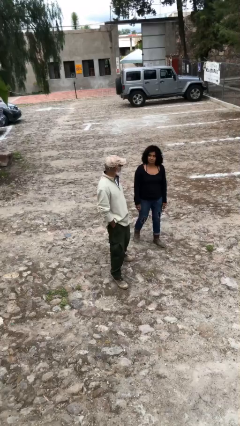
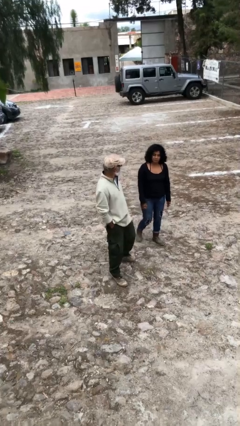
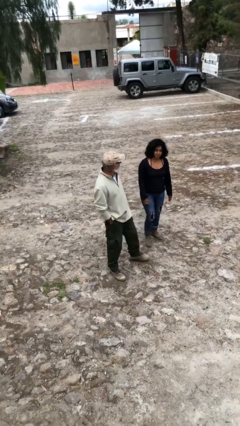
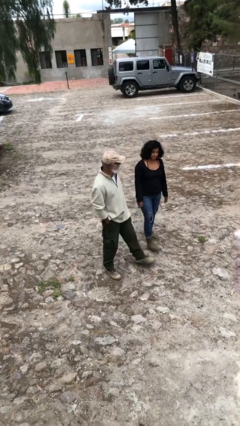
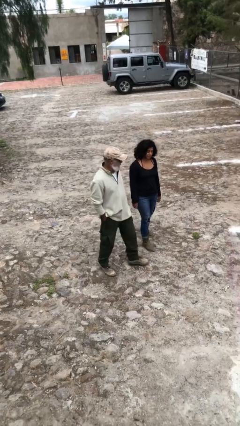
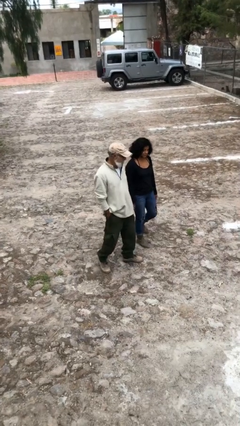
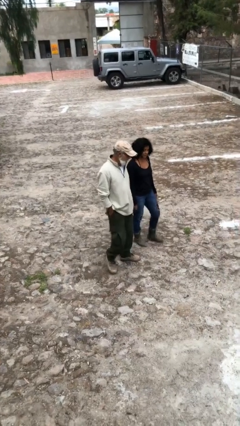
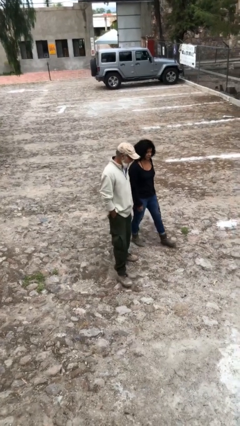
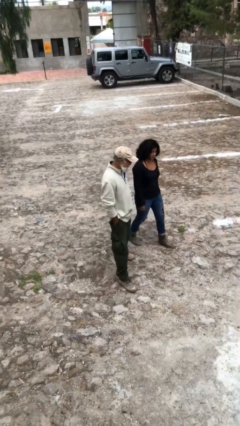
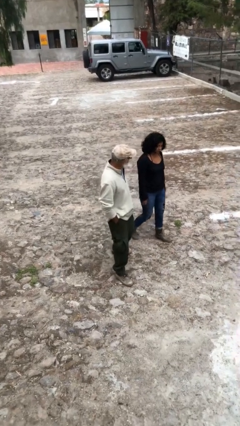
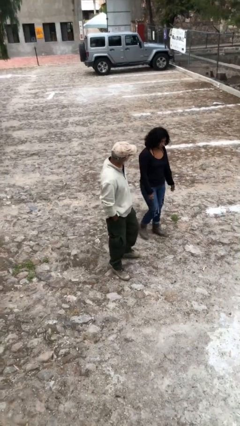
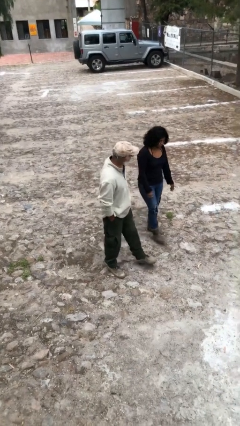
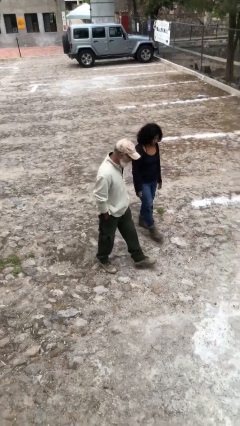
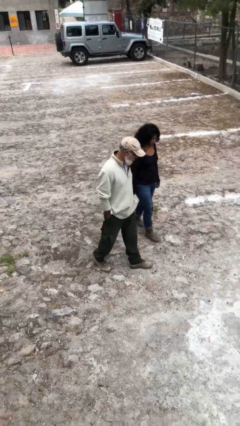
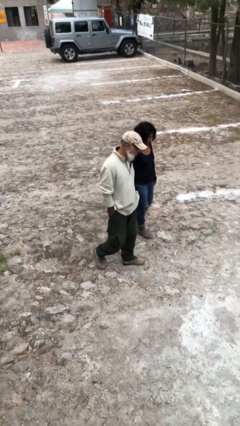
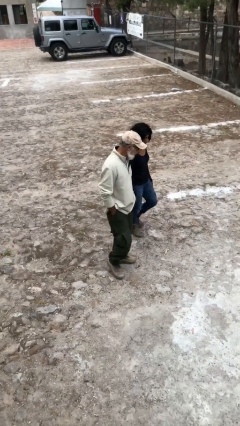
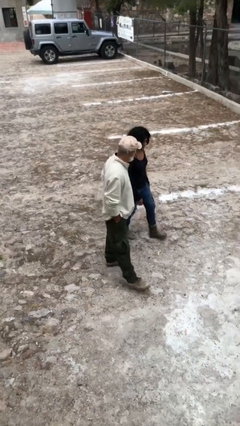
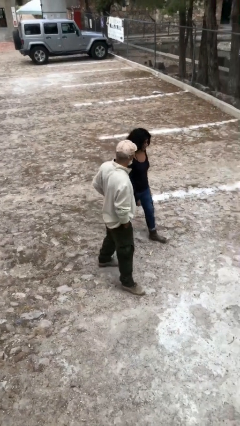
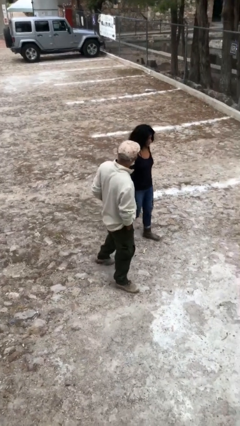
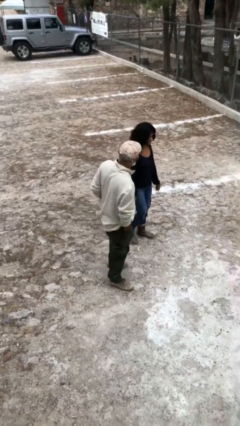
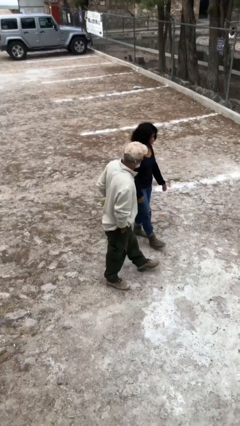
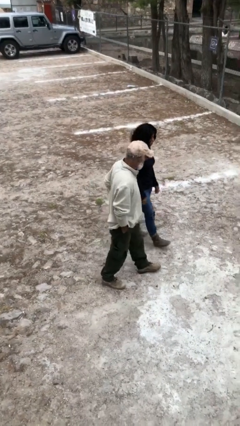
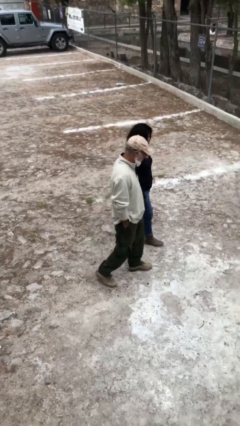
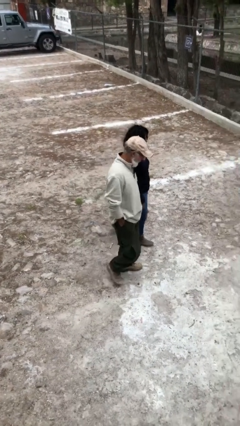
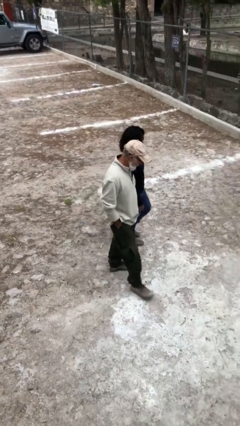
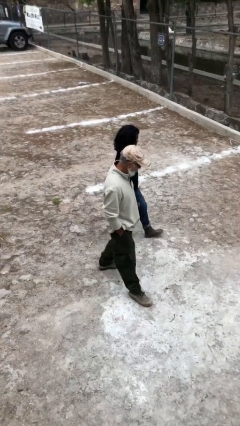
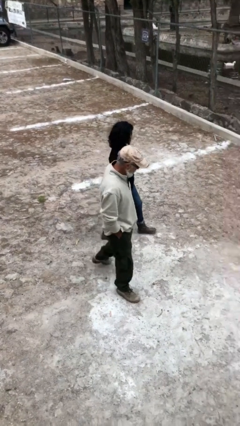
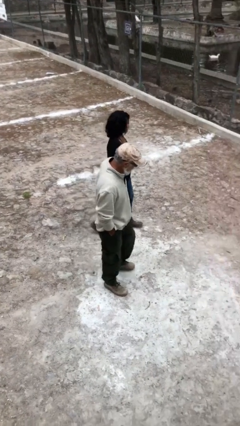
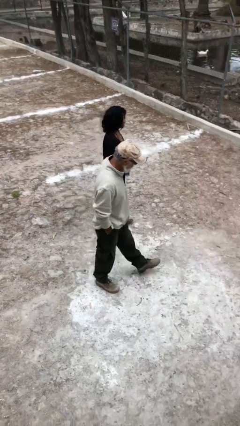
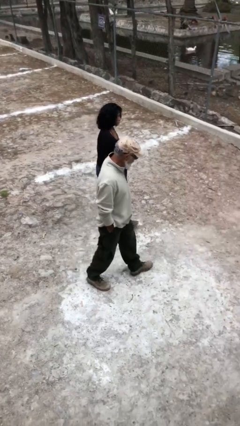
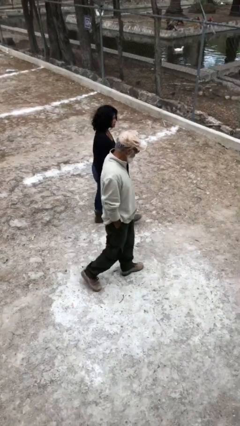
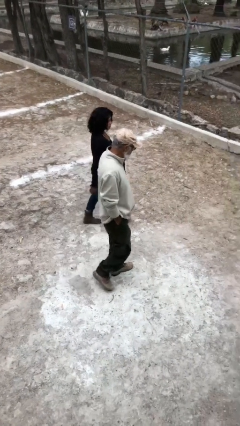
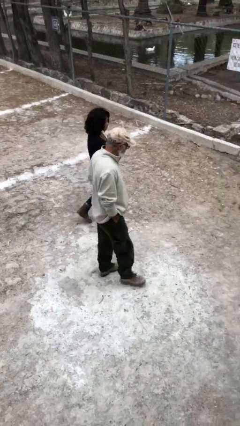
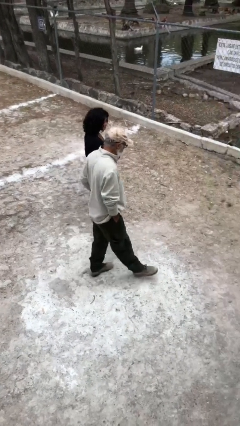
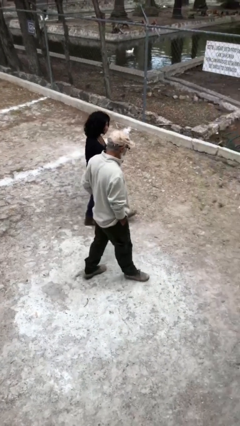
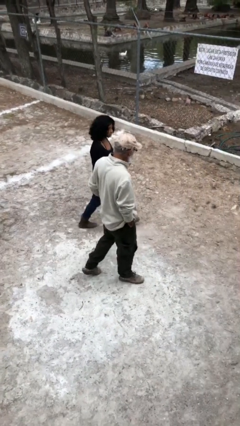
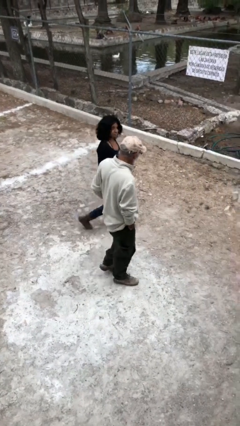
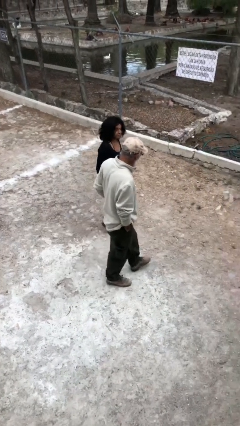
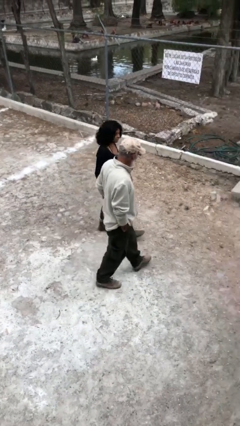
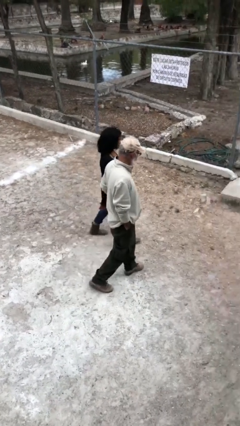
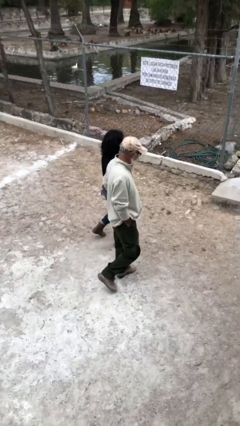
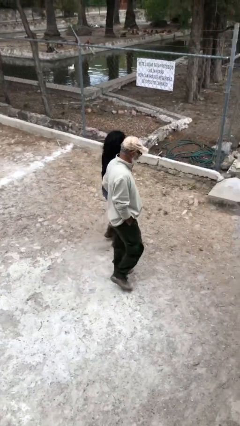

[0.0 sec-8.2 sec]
person talks to person

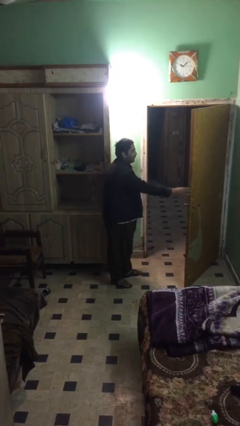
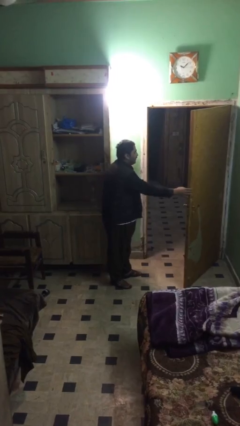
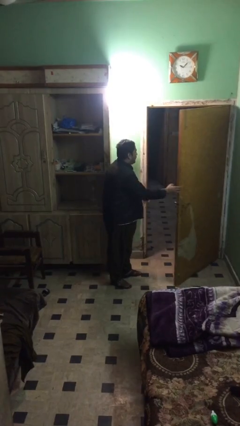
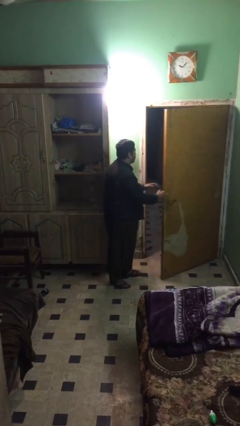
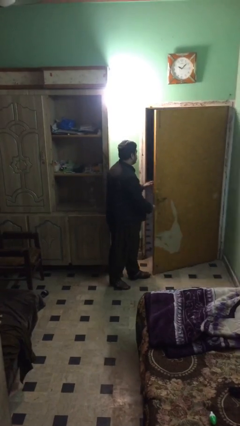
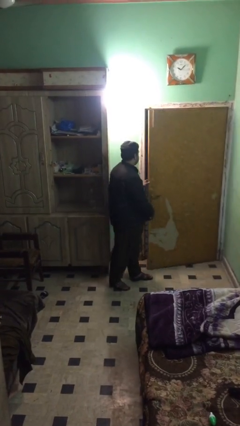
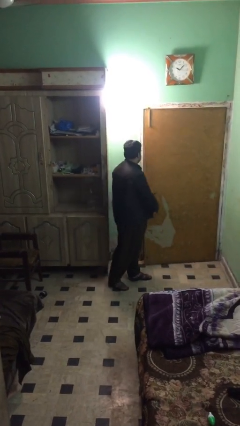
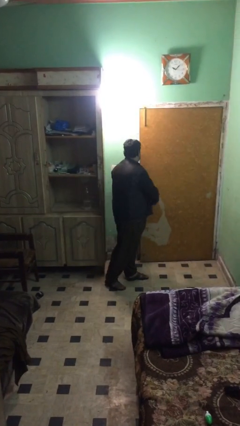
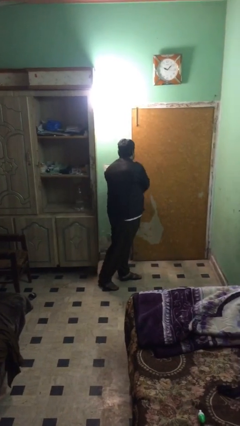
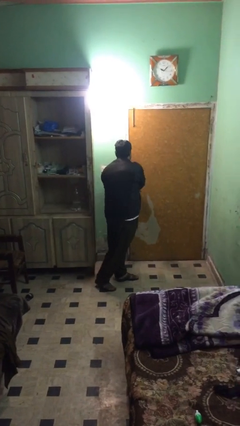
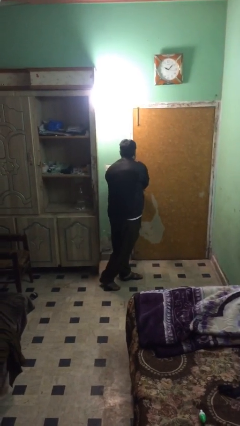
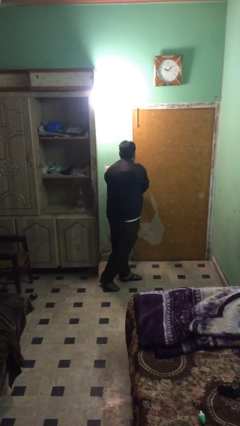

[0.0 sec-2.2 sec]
person closes facility door

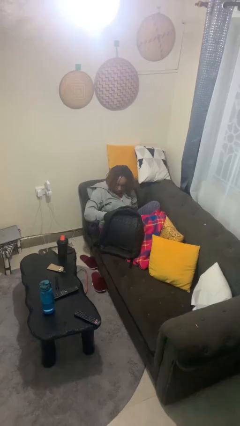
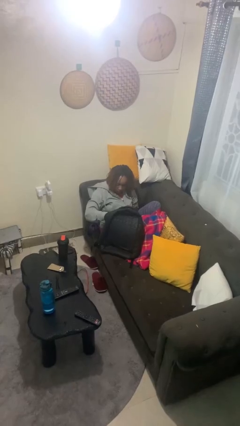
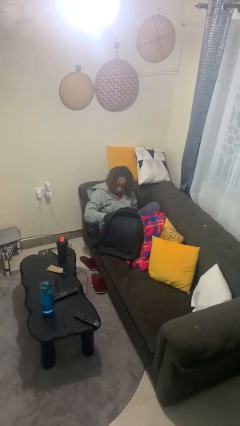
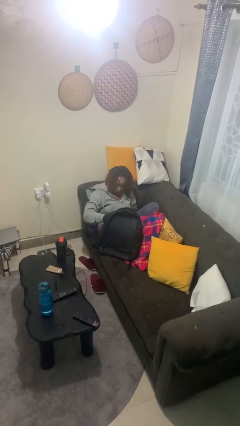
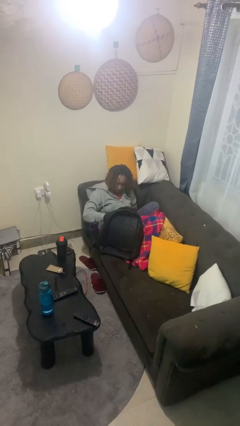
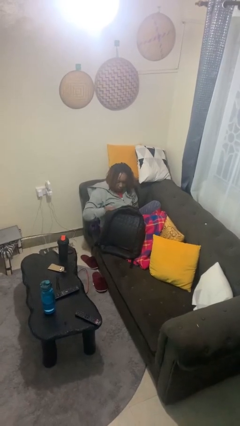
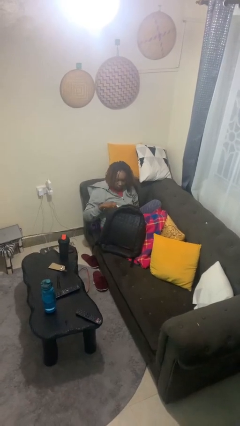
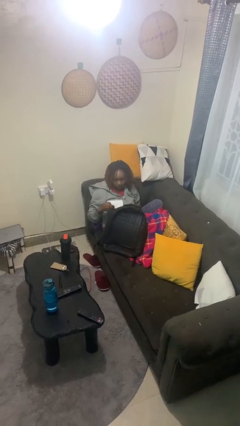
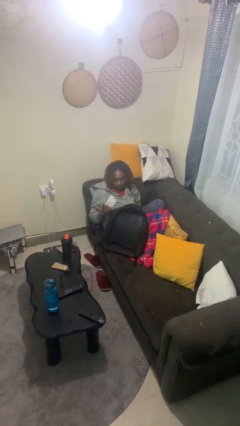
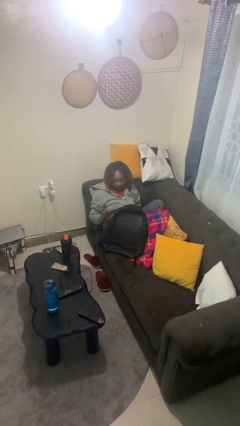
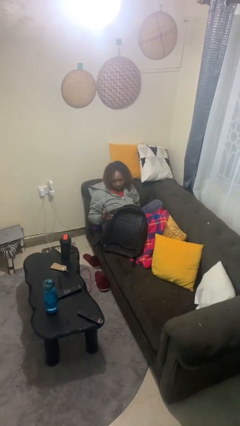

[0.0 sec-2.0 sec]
person takes object from backpack

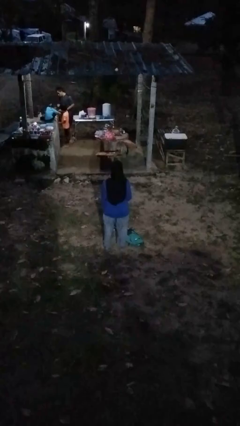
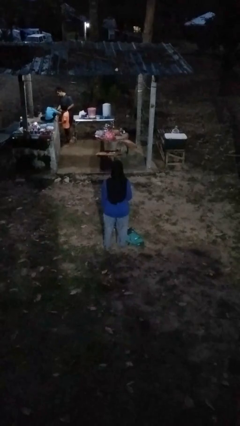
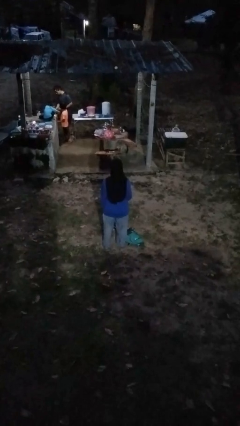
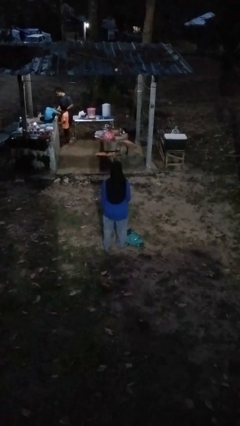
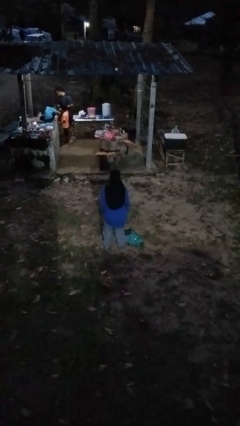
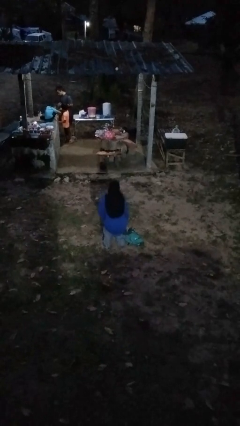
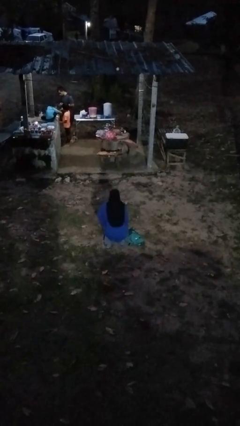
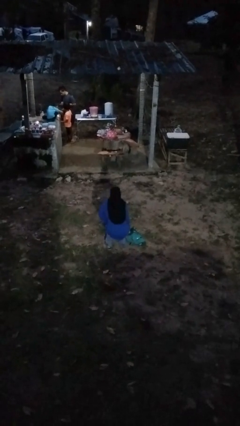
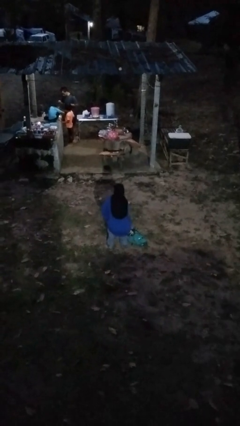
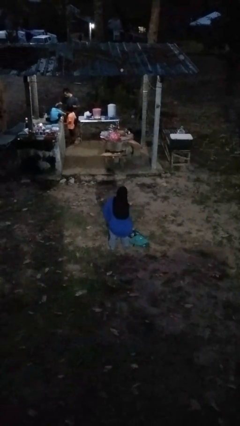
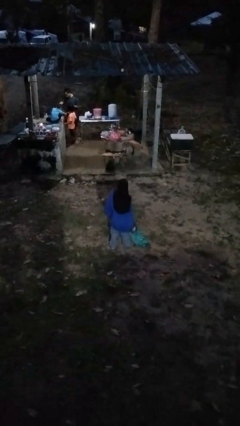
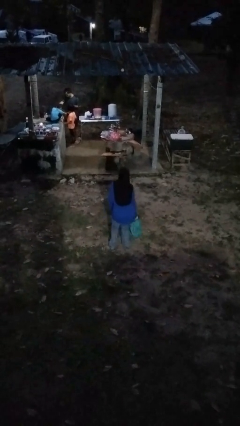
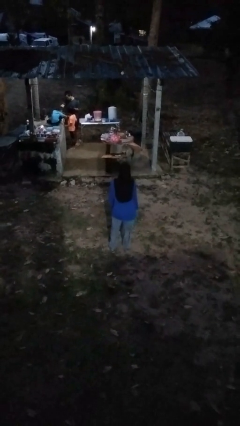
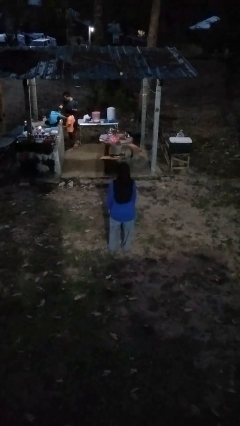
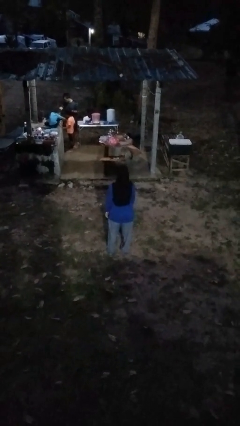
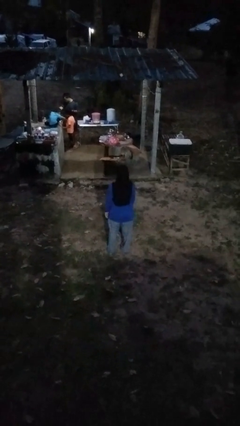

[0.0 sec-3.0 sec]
person picks up object from floor

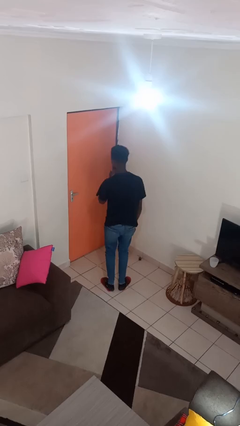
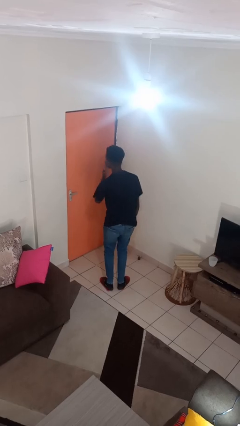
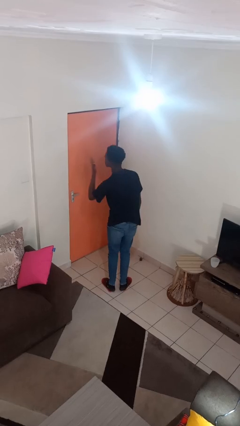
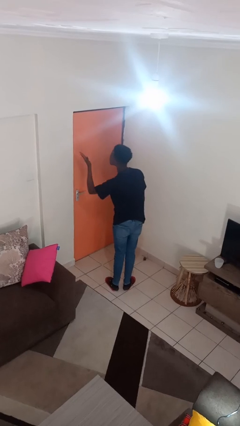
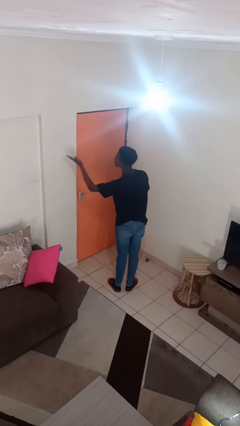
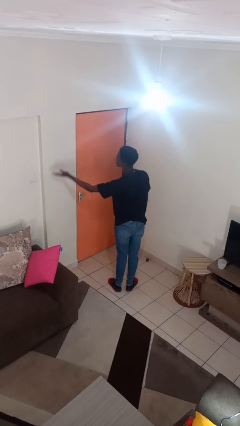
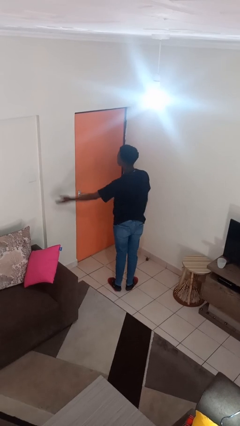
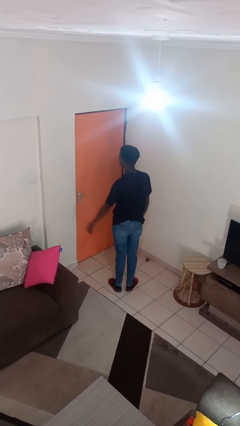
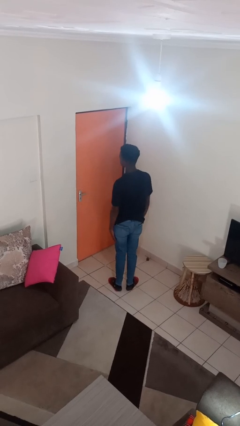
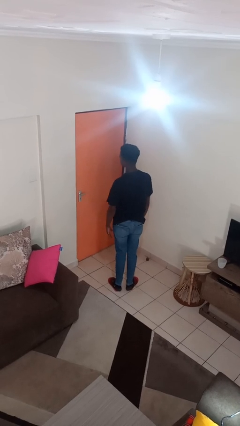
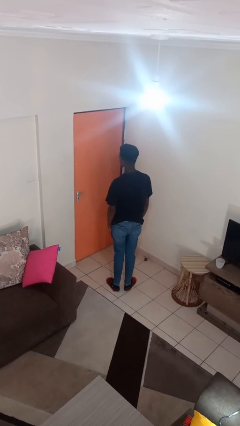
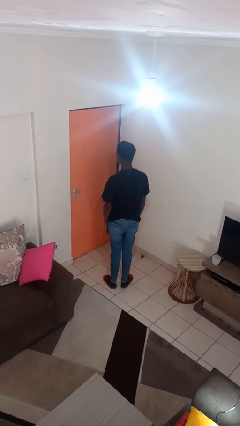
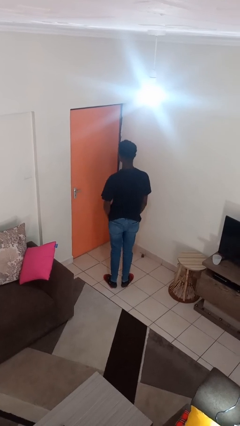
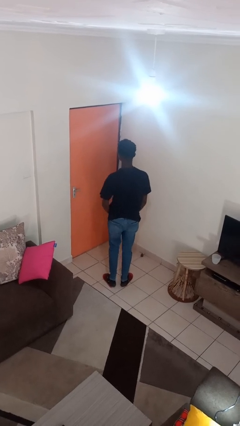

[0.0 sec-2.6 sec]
person gestures blow kiss
